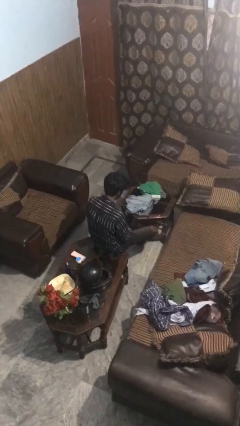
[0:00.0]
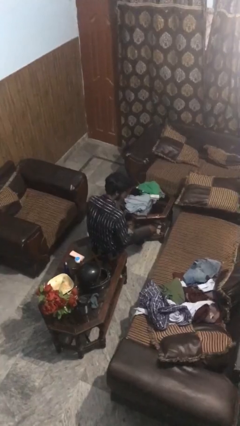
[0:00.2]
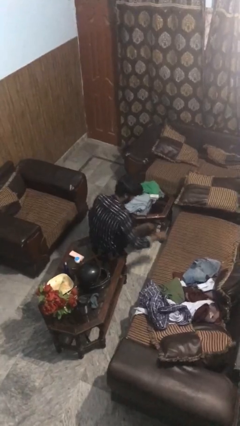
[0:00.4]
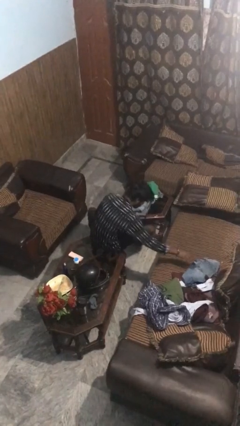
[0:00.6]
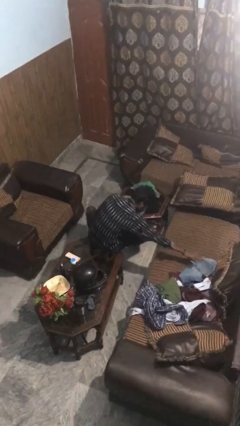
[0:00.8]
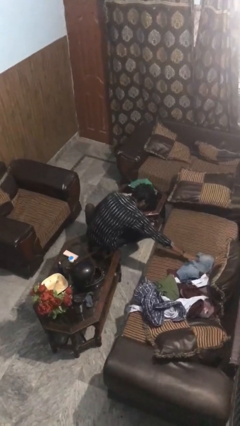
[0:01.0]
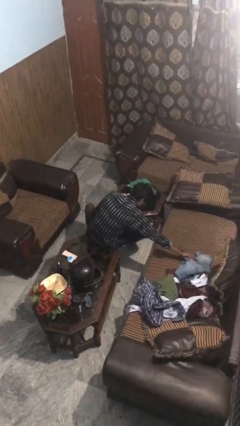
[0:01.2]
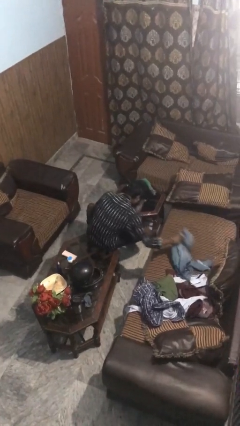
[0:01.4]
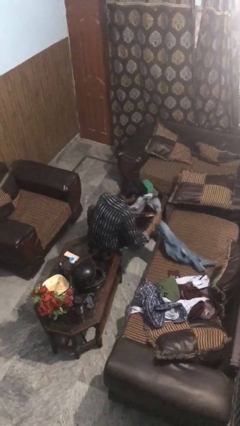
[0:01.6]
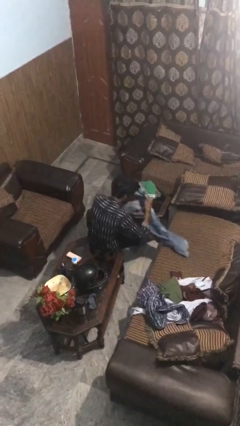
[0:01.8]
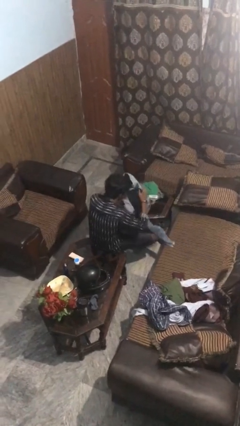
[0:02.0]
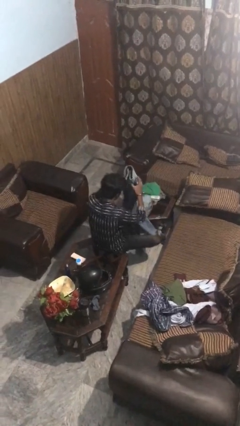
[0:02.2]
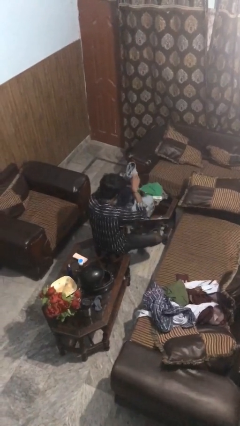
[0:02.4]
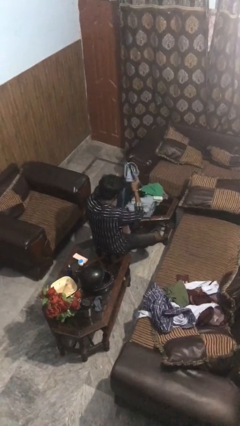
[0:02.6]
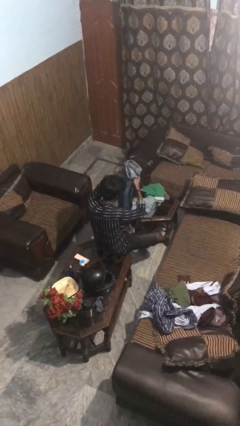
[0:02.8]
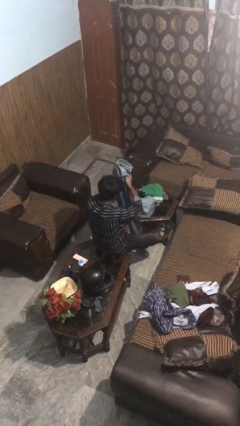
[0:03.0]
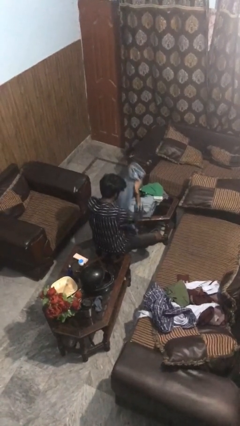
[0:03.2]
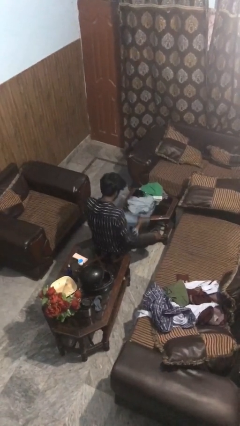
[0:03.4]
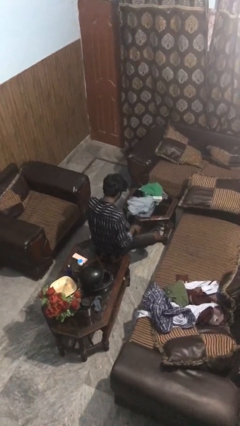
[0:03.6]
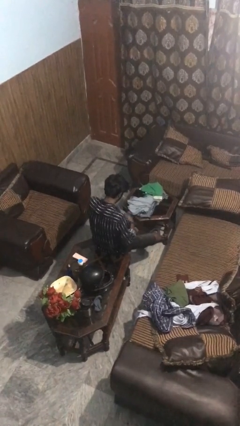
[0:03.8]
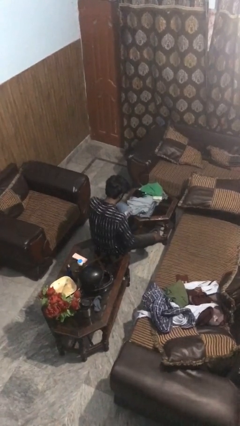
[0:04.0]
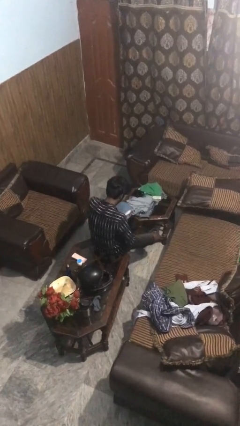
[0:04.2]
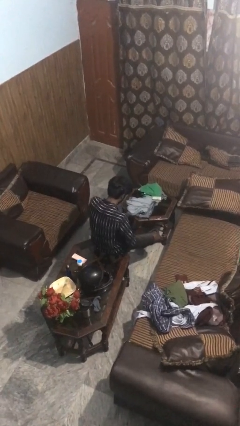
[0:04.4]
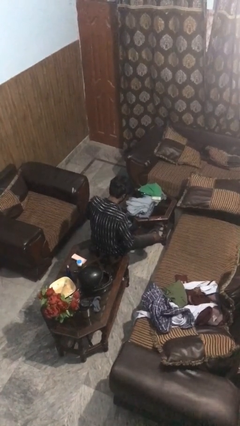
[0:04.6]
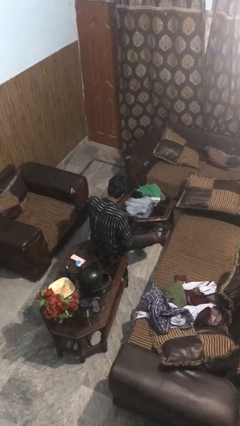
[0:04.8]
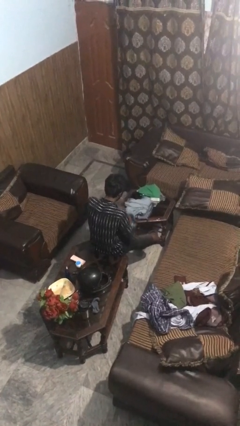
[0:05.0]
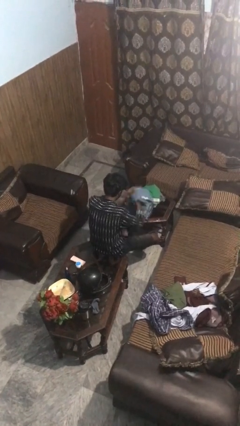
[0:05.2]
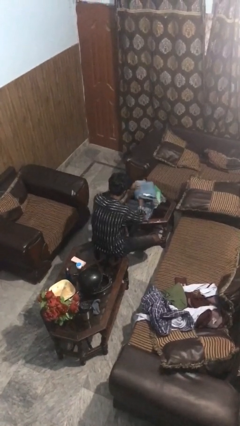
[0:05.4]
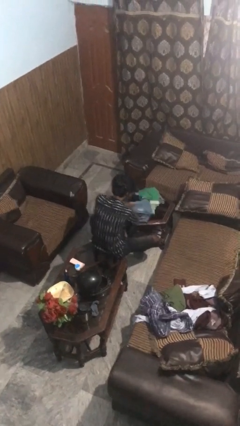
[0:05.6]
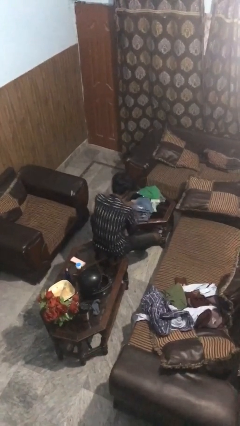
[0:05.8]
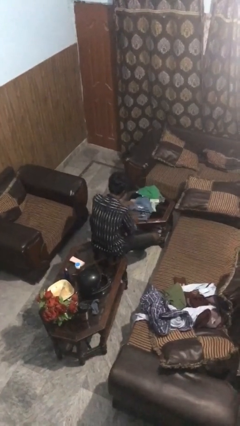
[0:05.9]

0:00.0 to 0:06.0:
person folds pants

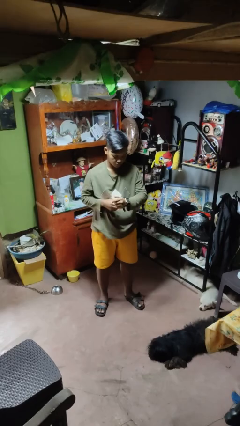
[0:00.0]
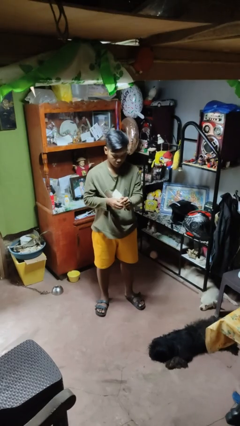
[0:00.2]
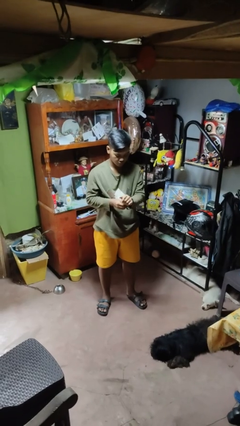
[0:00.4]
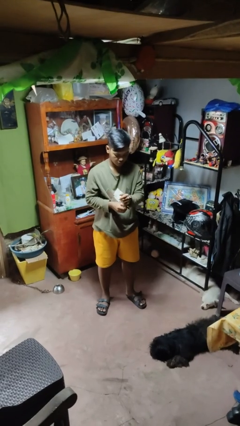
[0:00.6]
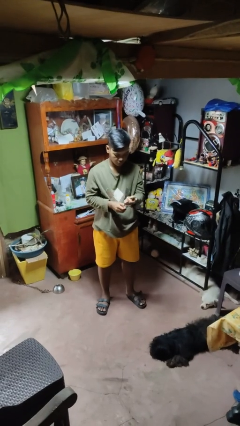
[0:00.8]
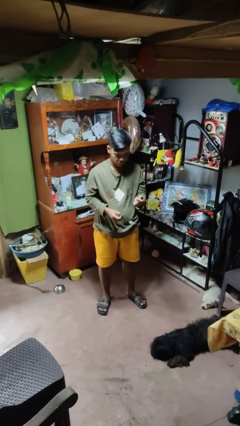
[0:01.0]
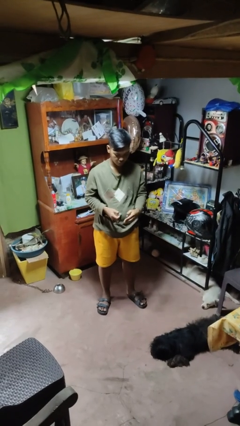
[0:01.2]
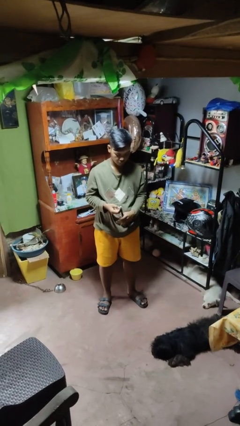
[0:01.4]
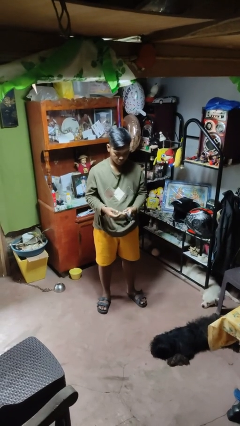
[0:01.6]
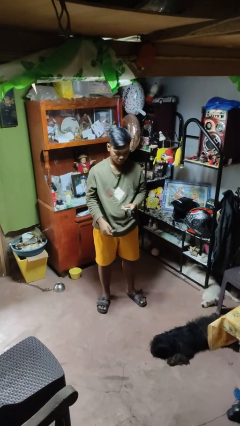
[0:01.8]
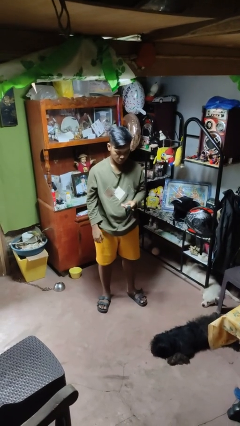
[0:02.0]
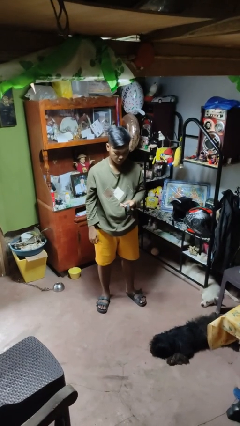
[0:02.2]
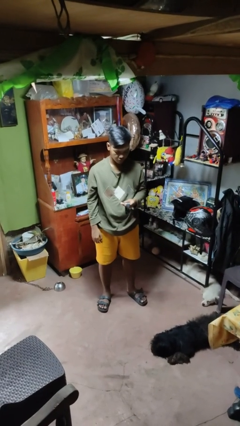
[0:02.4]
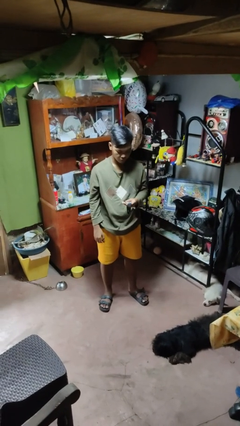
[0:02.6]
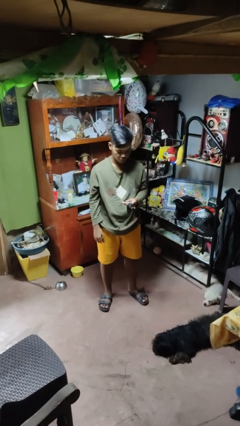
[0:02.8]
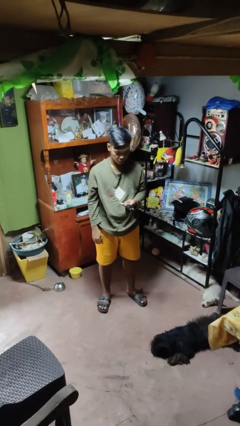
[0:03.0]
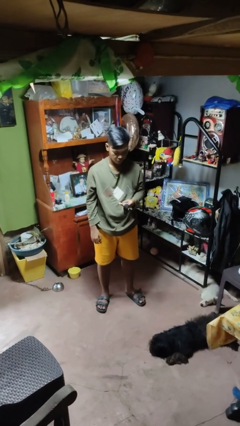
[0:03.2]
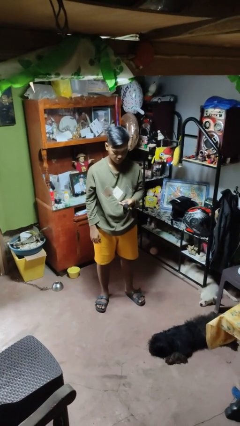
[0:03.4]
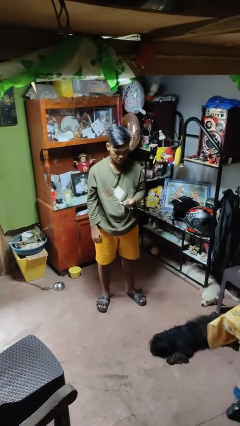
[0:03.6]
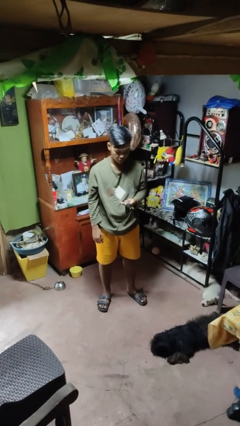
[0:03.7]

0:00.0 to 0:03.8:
person takes off wristwatch

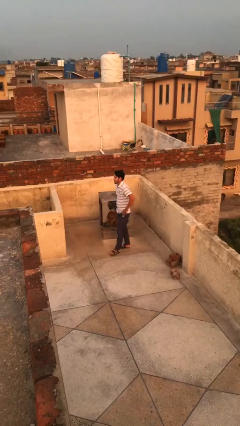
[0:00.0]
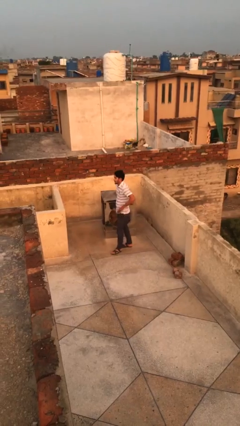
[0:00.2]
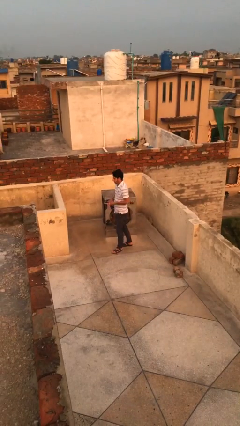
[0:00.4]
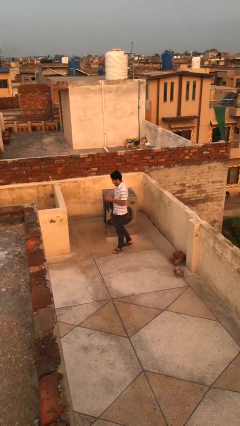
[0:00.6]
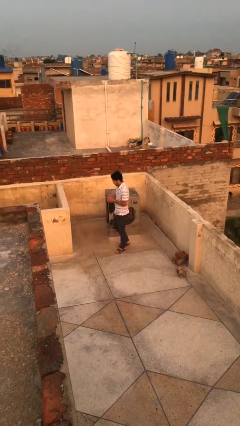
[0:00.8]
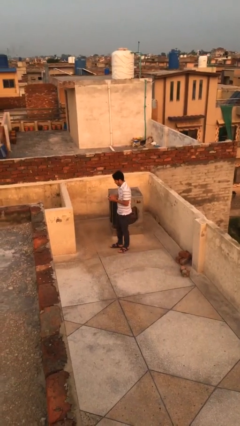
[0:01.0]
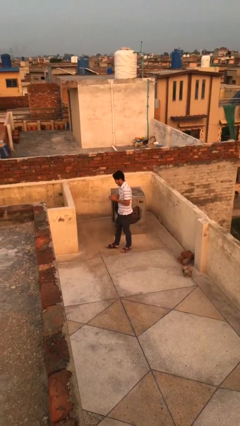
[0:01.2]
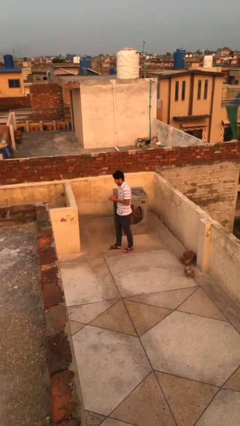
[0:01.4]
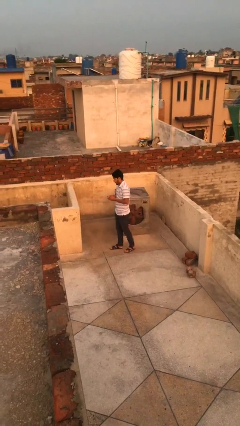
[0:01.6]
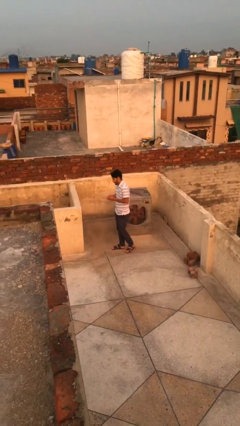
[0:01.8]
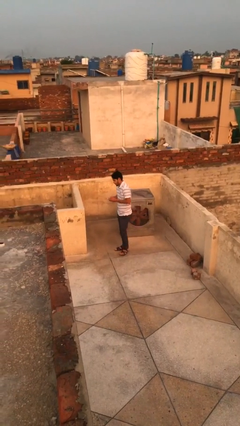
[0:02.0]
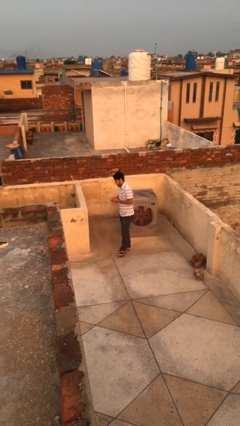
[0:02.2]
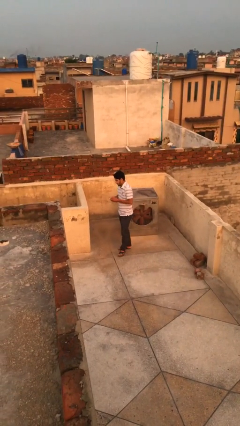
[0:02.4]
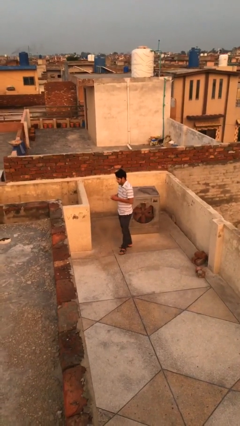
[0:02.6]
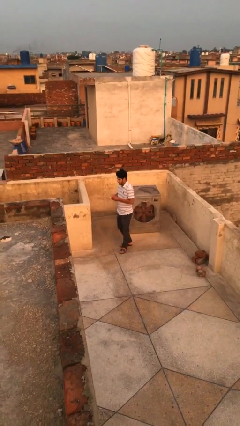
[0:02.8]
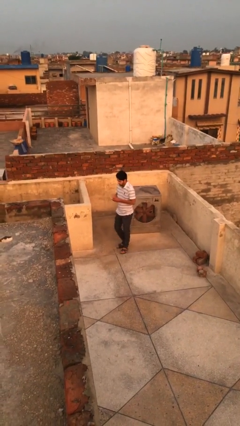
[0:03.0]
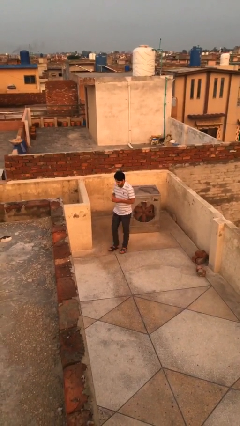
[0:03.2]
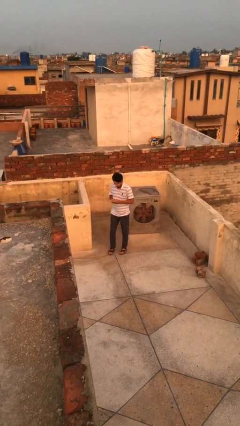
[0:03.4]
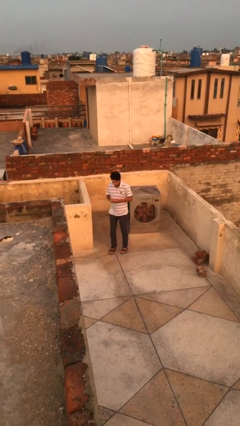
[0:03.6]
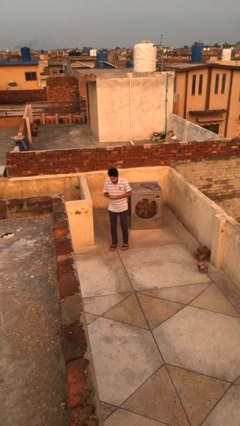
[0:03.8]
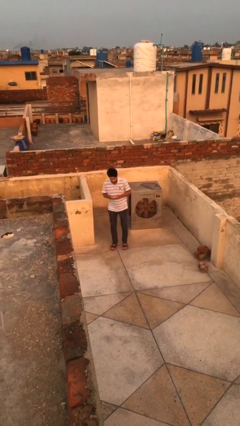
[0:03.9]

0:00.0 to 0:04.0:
person texts on phone

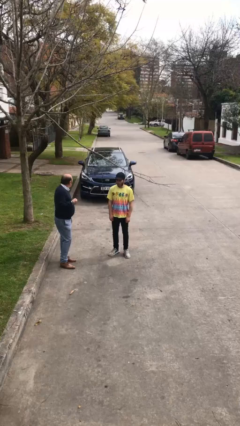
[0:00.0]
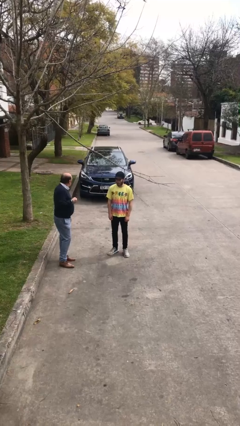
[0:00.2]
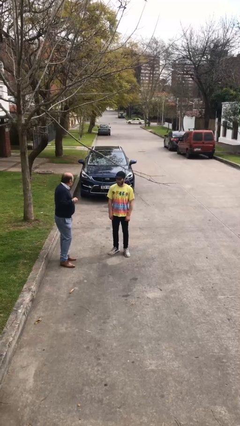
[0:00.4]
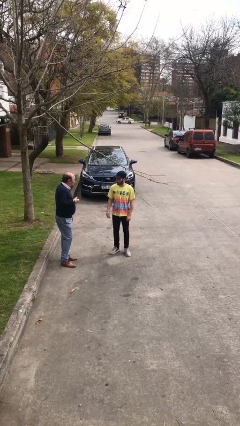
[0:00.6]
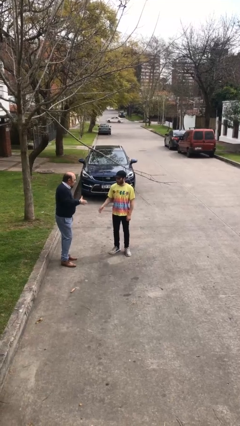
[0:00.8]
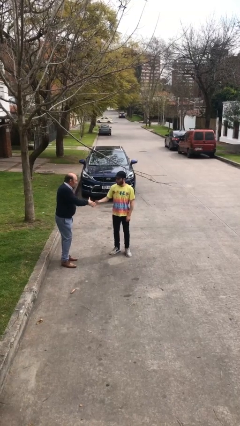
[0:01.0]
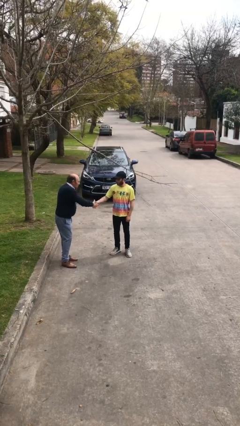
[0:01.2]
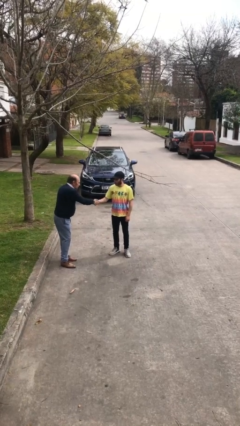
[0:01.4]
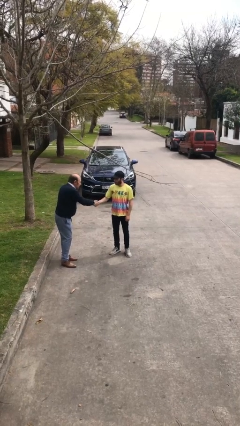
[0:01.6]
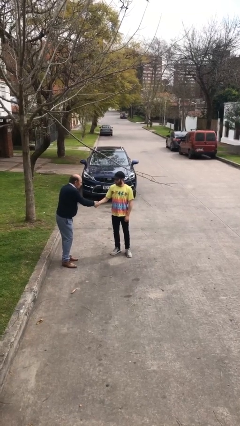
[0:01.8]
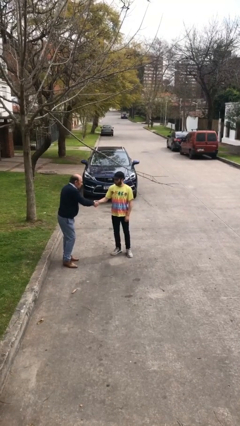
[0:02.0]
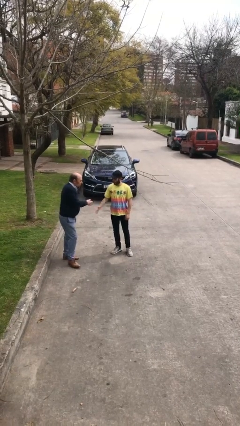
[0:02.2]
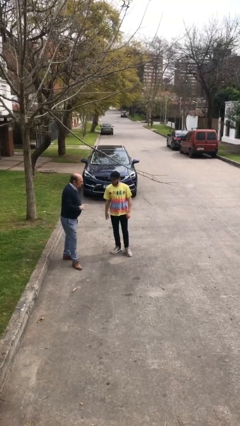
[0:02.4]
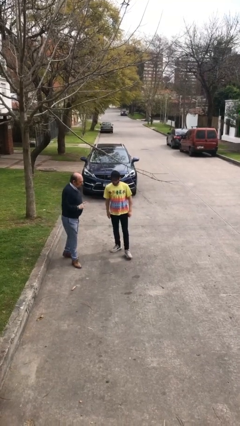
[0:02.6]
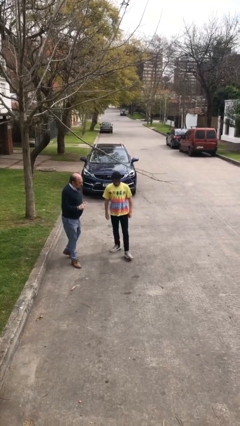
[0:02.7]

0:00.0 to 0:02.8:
person shakes hand

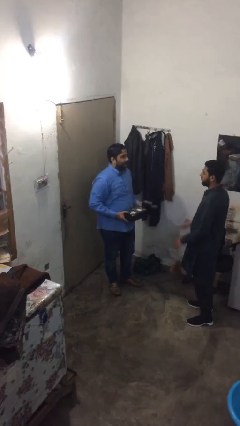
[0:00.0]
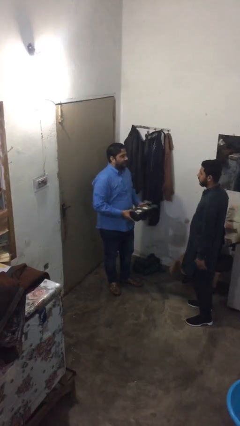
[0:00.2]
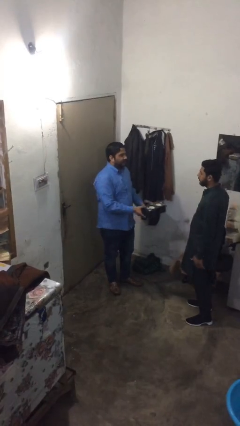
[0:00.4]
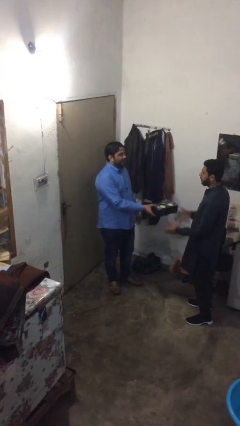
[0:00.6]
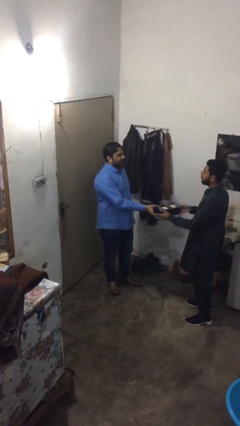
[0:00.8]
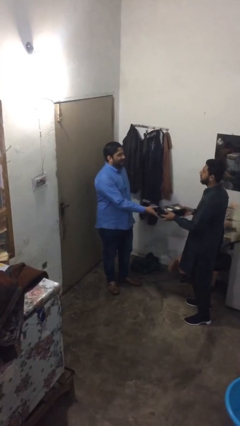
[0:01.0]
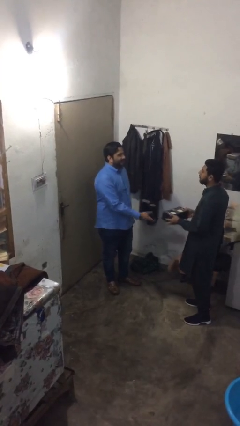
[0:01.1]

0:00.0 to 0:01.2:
person transfers object to person
